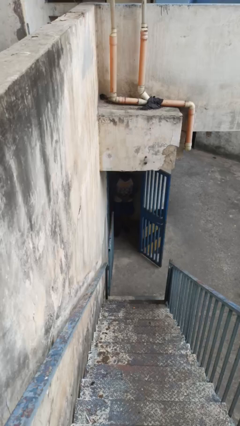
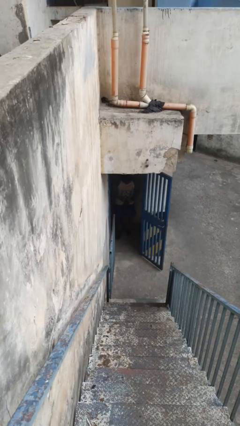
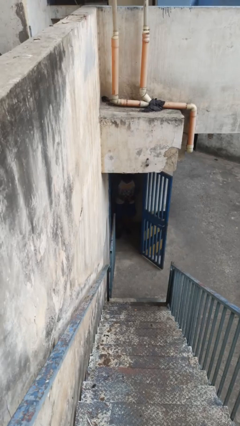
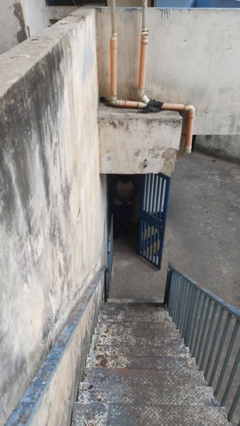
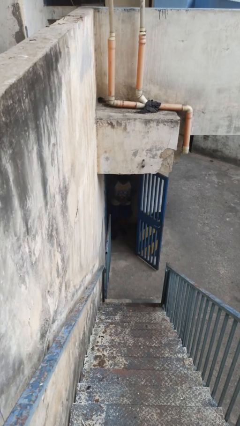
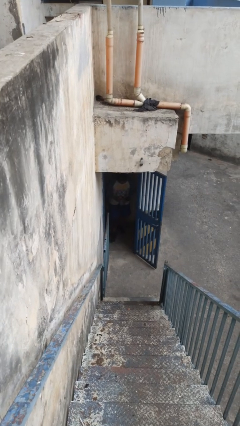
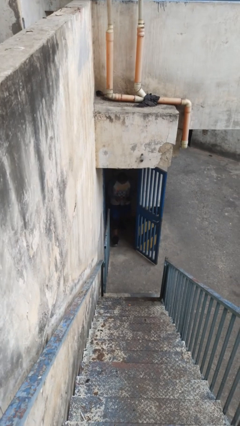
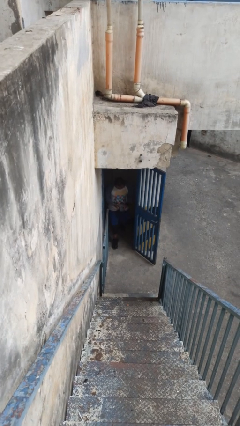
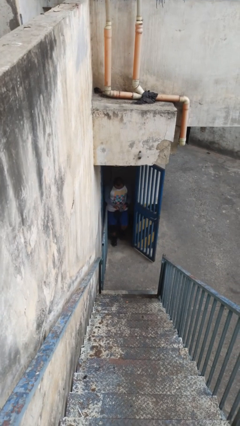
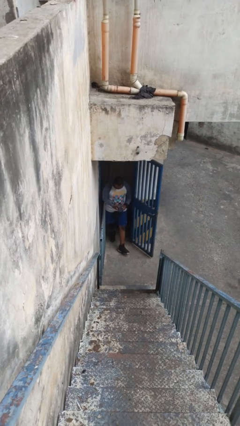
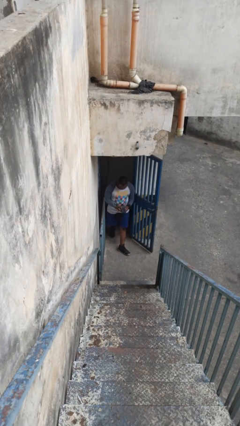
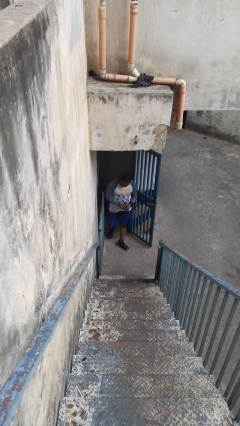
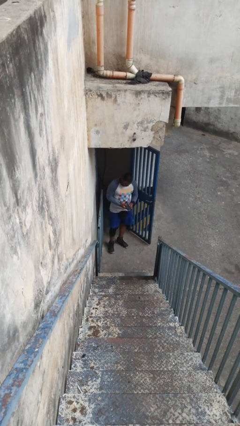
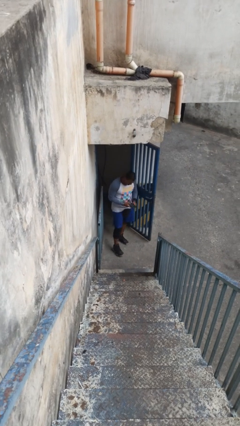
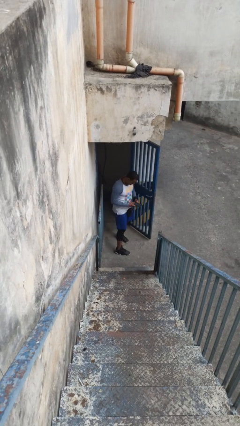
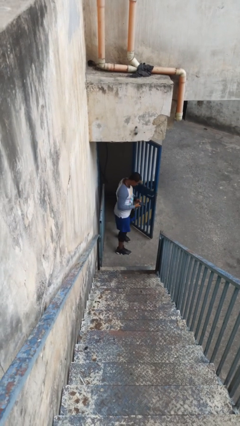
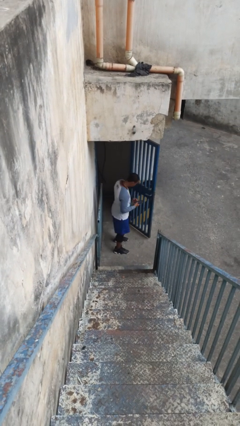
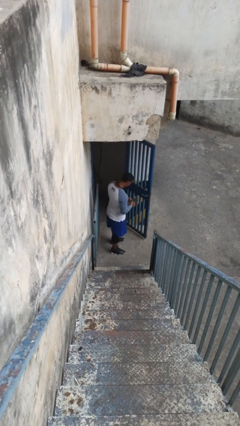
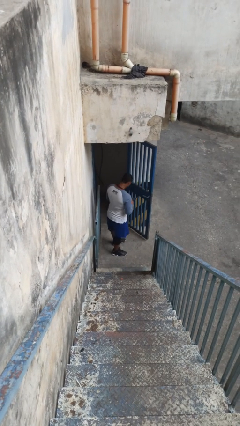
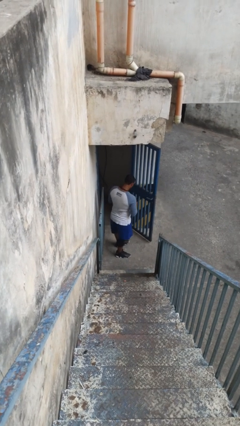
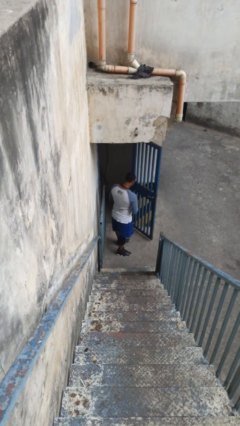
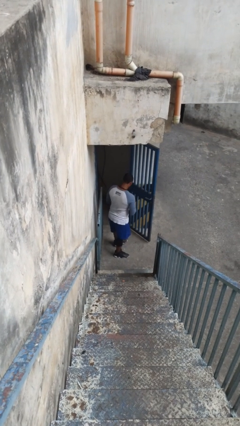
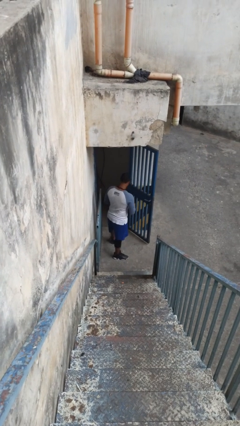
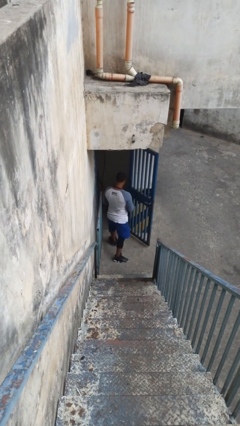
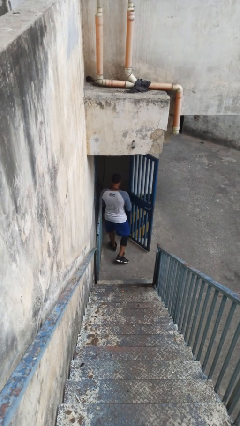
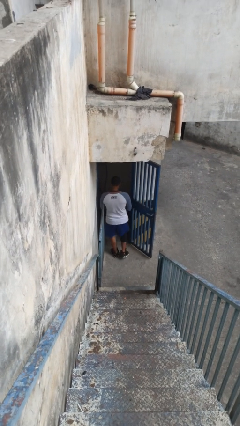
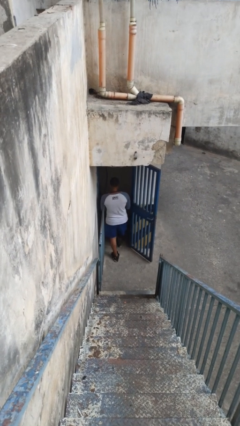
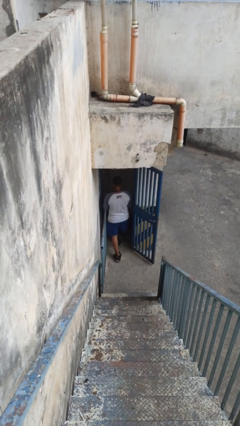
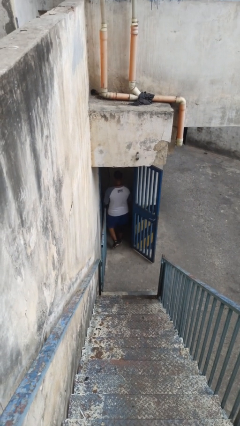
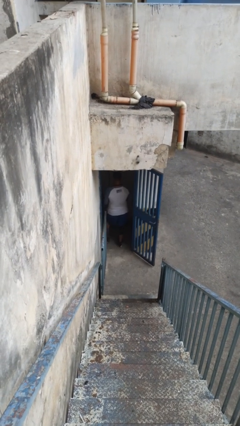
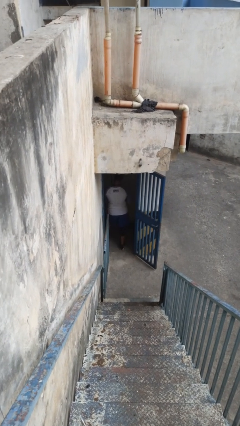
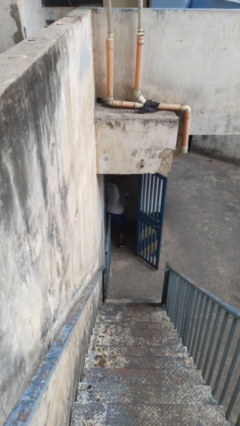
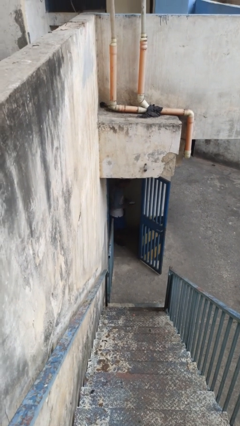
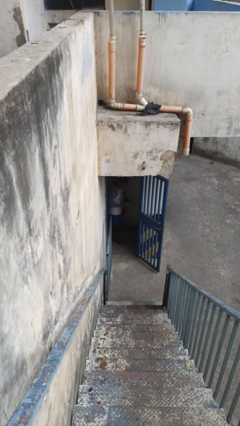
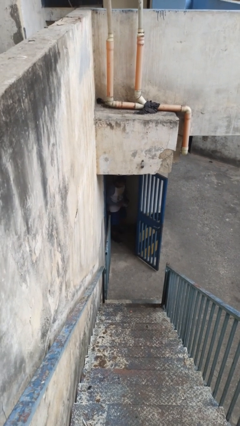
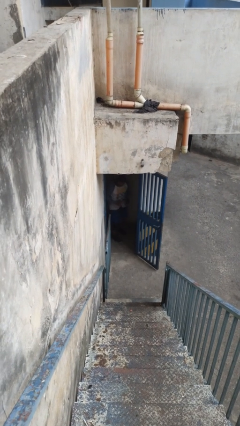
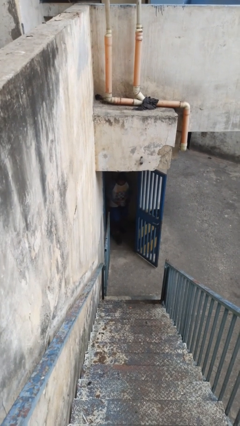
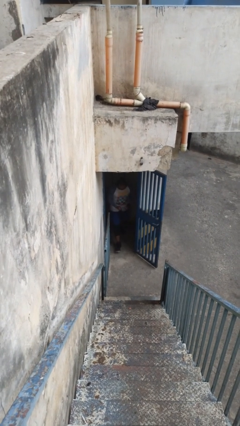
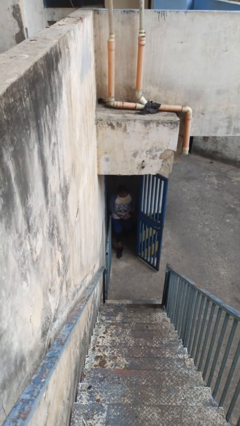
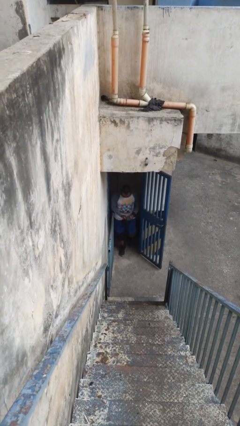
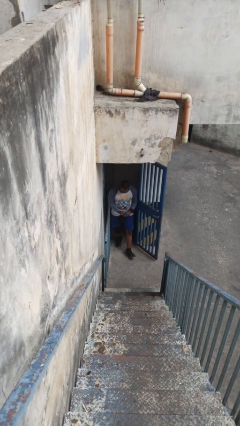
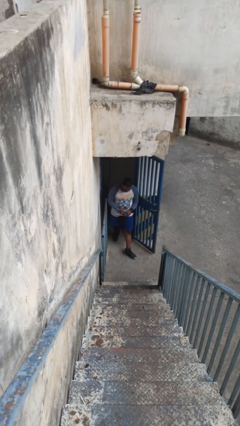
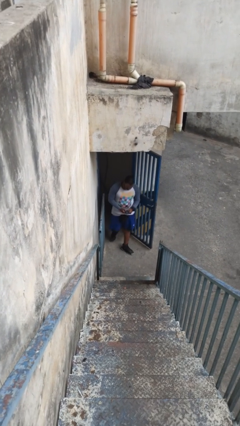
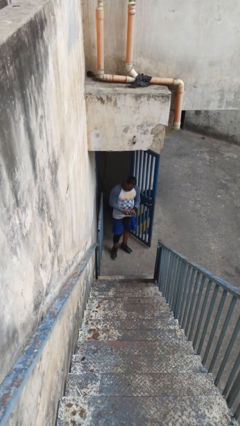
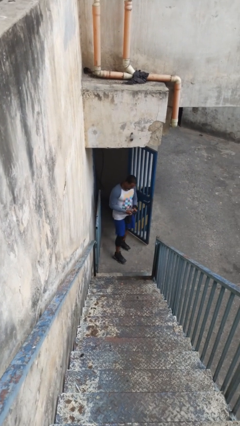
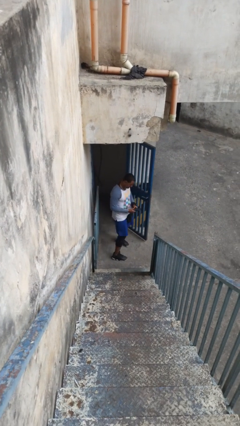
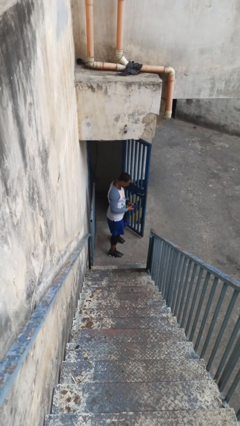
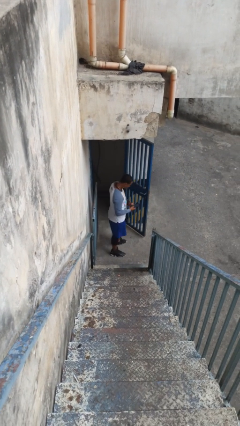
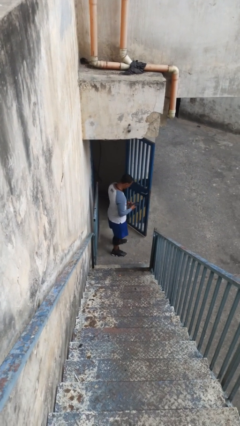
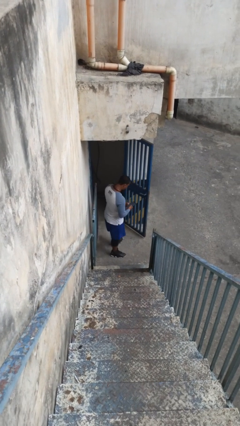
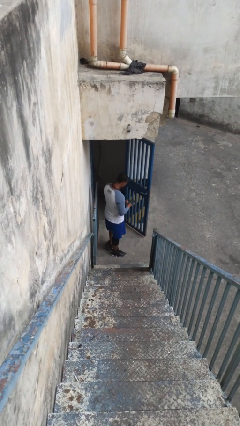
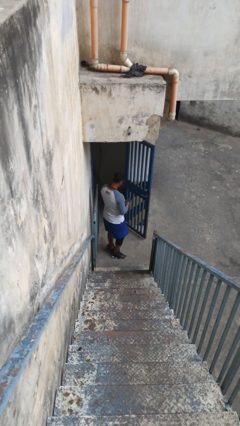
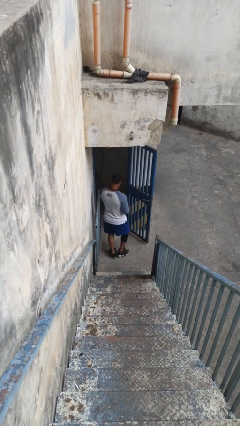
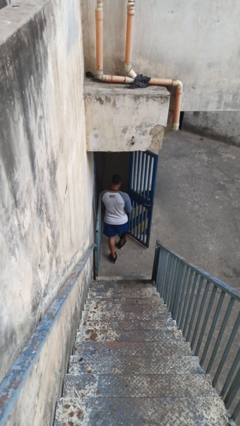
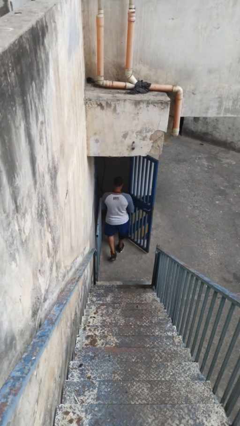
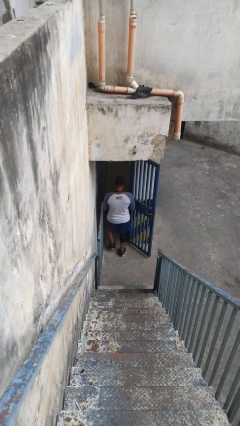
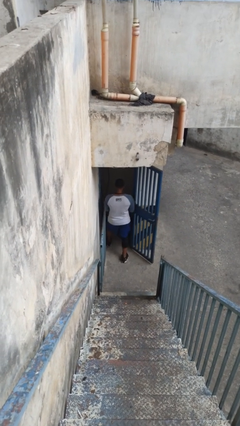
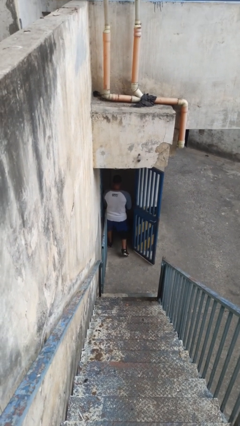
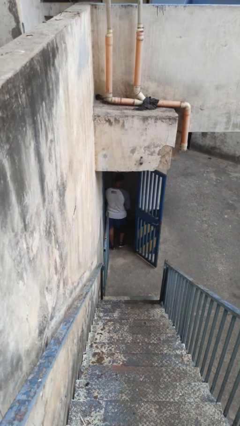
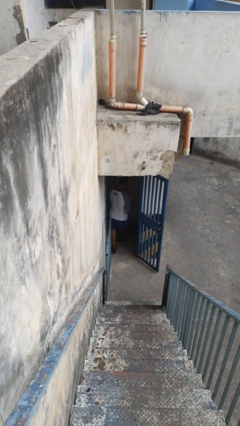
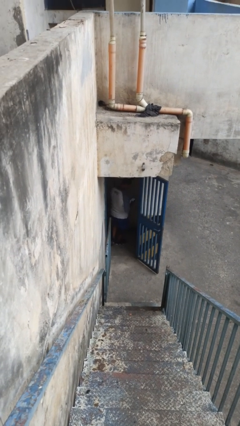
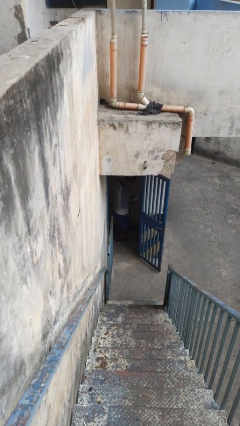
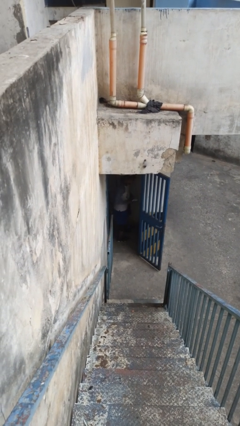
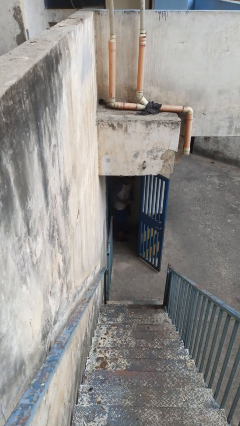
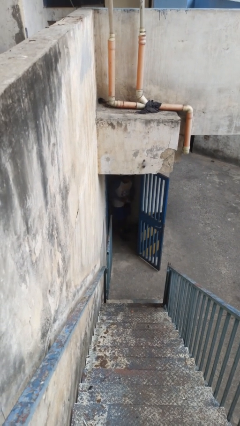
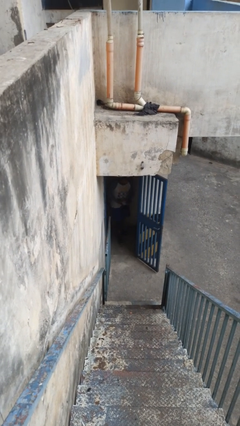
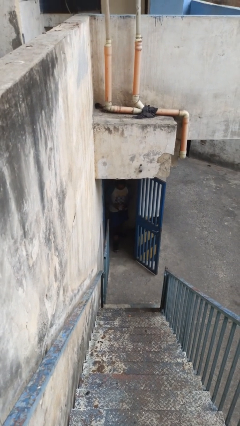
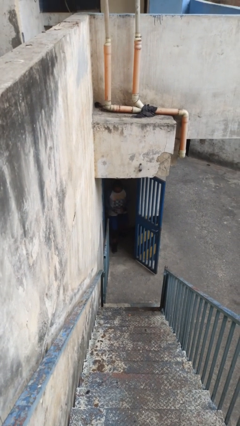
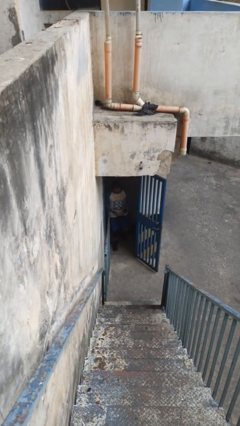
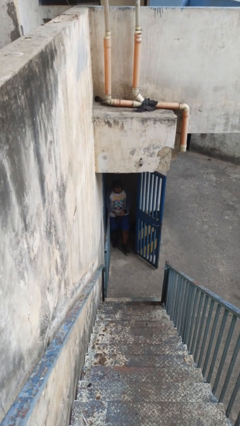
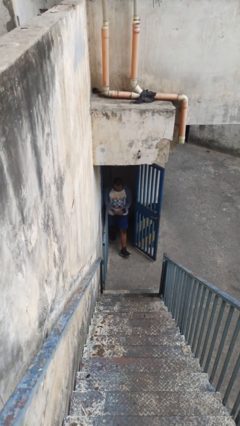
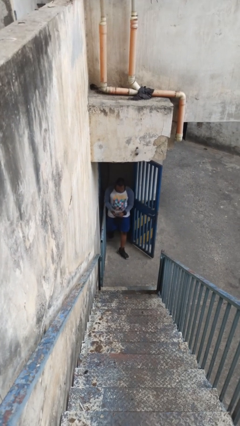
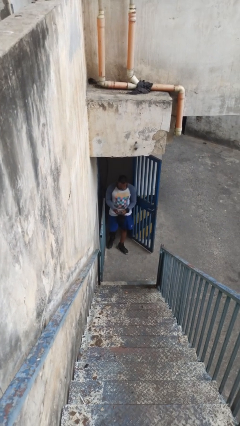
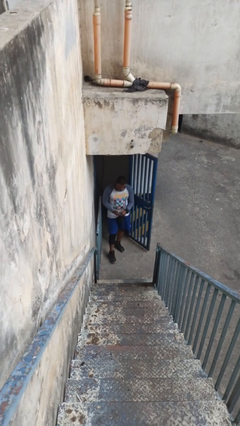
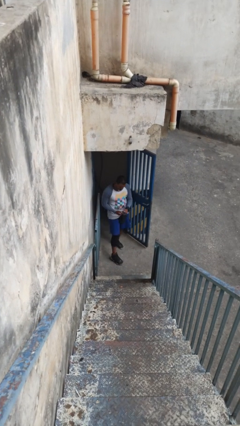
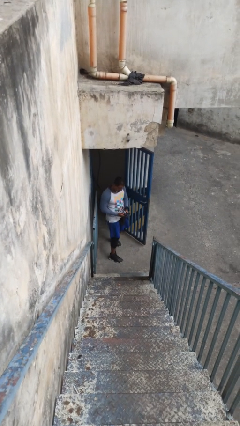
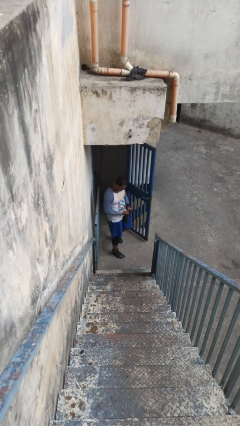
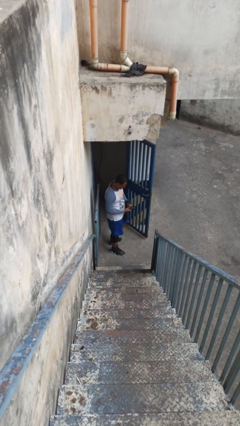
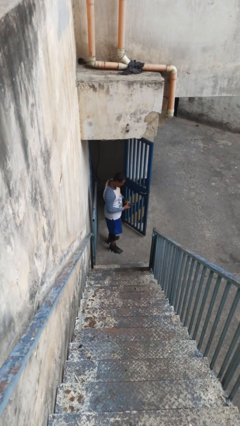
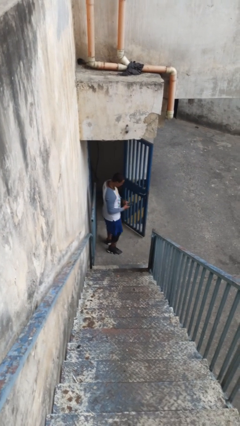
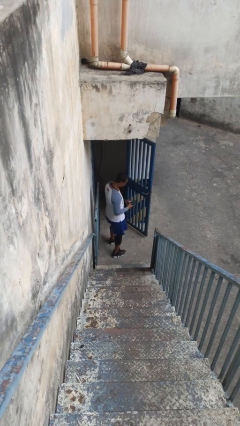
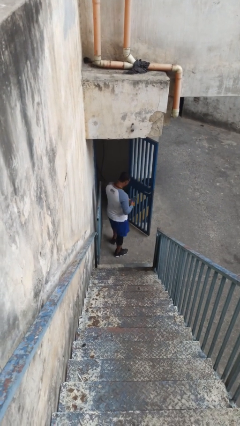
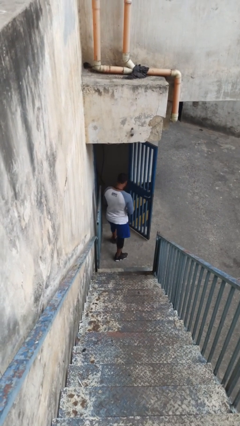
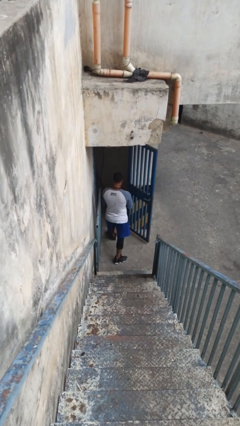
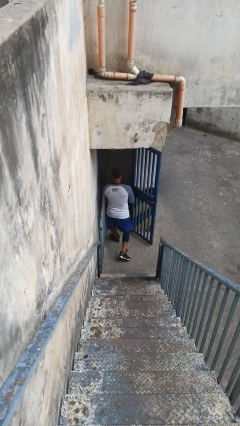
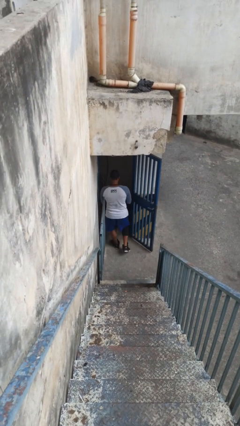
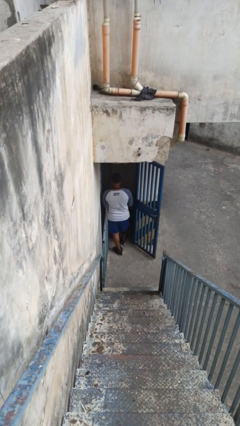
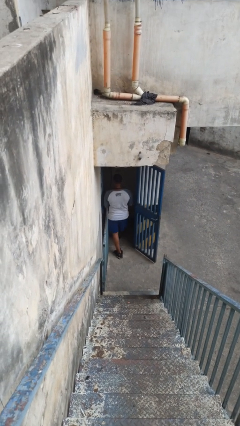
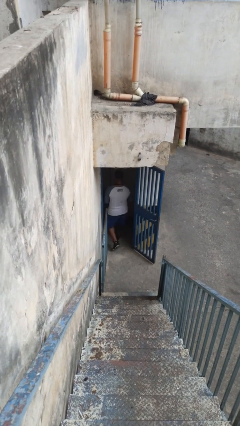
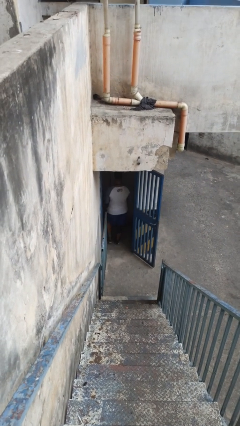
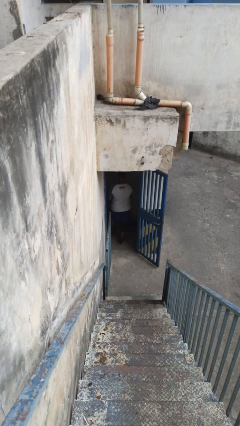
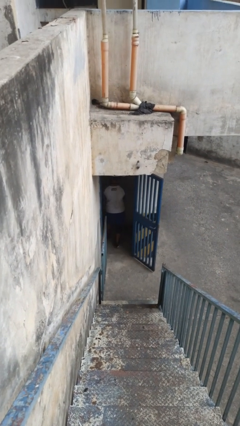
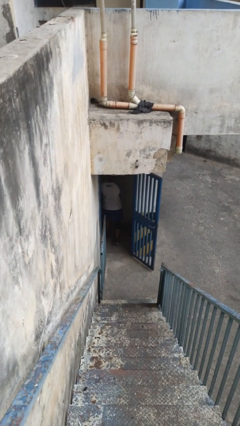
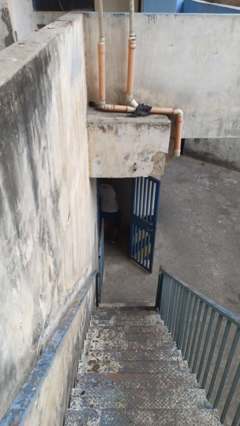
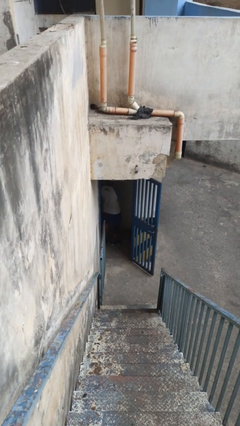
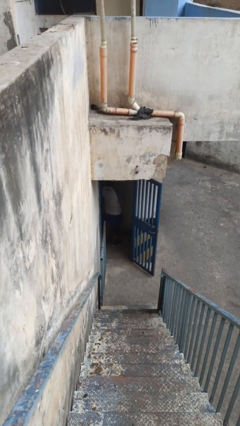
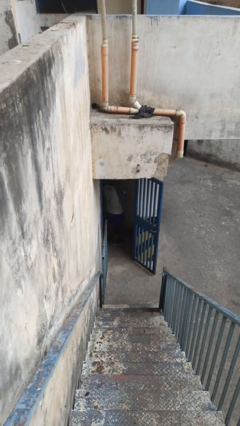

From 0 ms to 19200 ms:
person texts on phone
